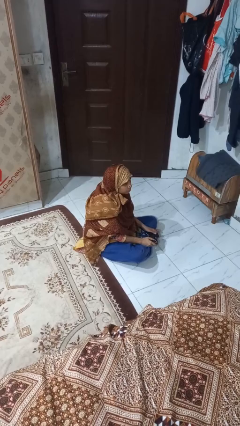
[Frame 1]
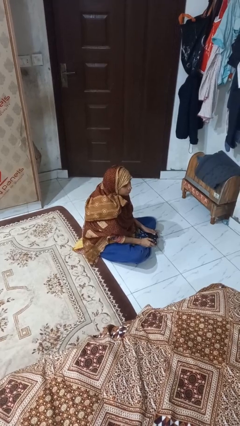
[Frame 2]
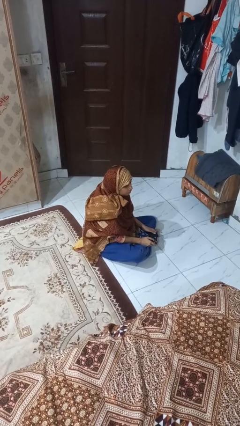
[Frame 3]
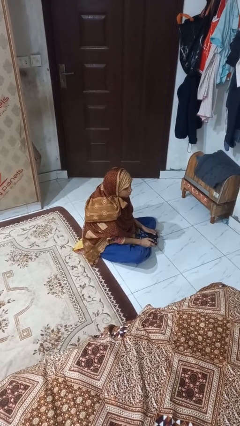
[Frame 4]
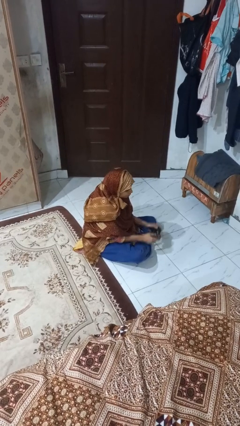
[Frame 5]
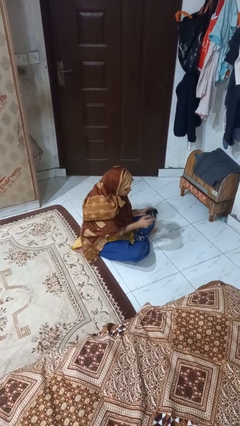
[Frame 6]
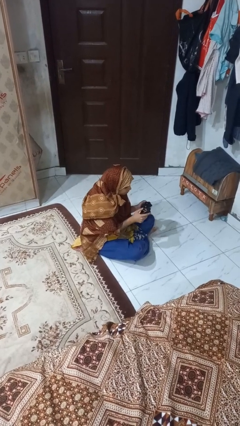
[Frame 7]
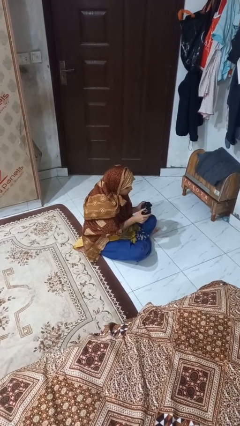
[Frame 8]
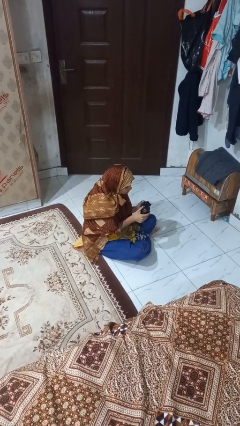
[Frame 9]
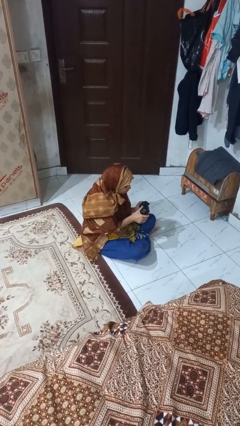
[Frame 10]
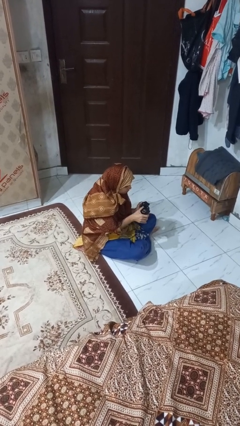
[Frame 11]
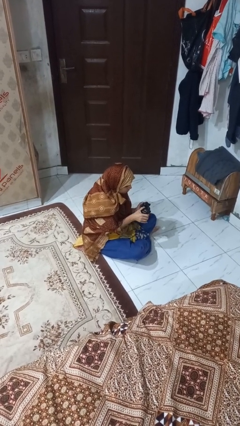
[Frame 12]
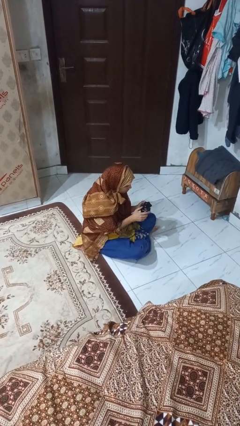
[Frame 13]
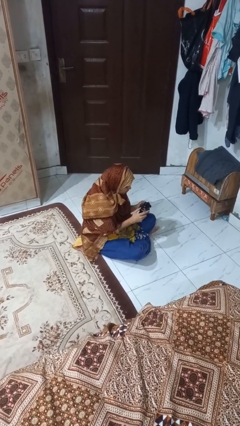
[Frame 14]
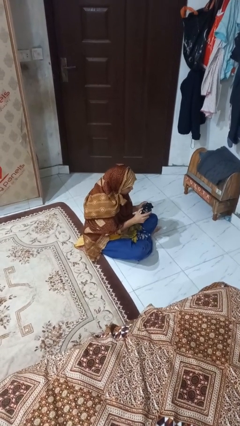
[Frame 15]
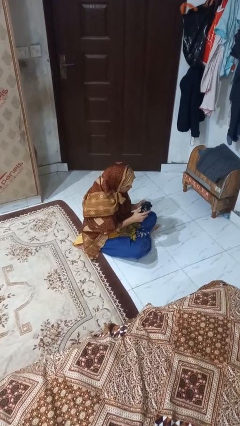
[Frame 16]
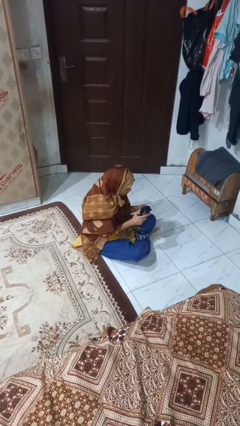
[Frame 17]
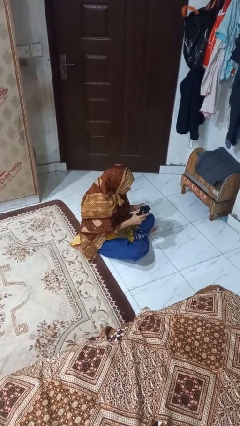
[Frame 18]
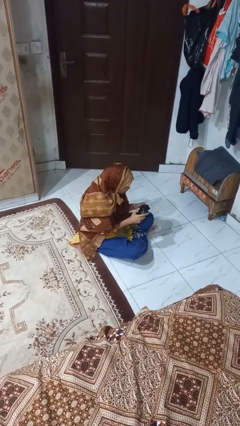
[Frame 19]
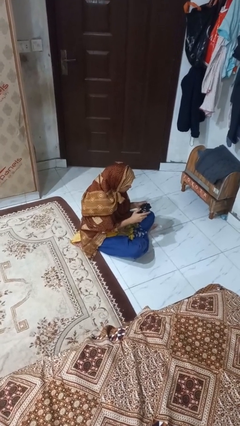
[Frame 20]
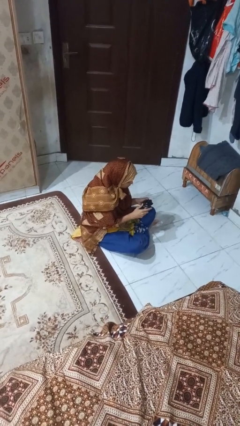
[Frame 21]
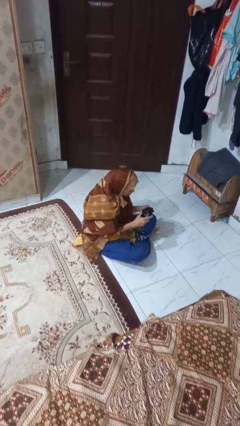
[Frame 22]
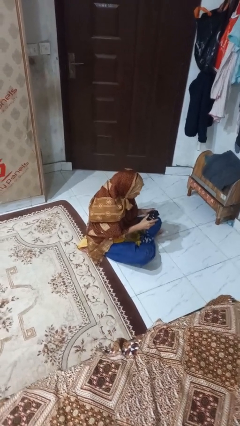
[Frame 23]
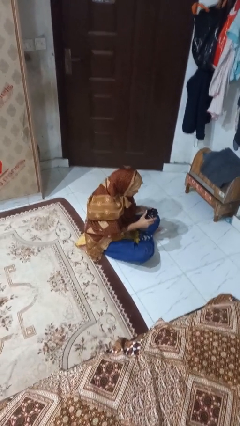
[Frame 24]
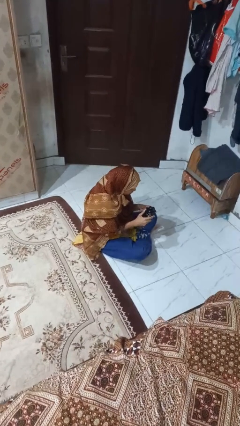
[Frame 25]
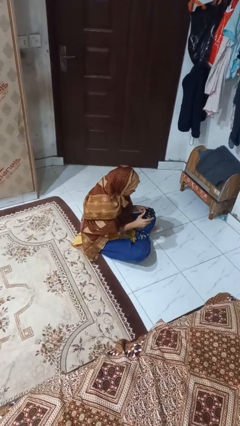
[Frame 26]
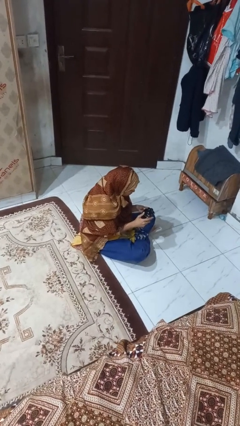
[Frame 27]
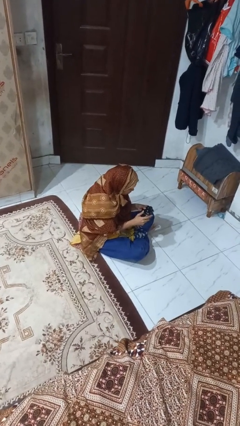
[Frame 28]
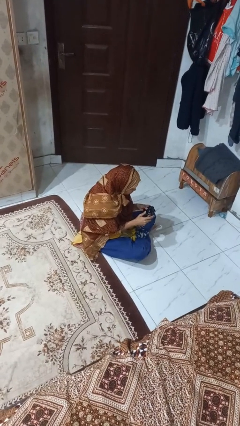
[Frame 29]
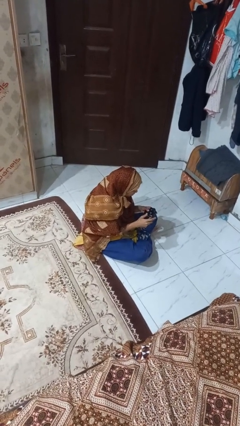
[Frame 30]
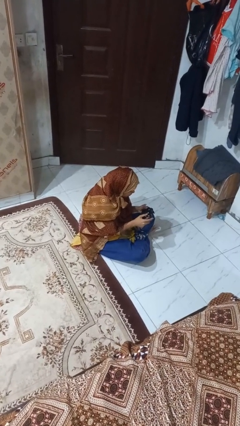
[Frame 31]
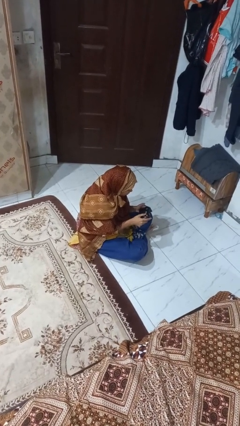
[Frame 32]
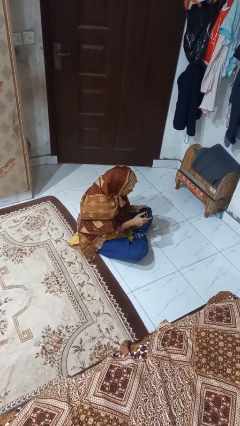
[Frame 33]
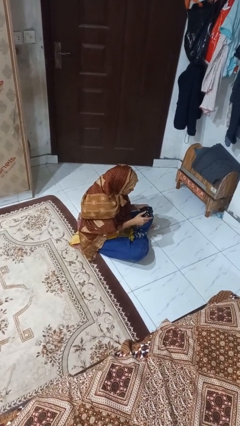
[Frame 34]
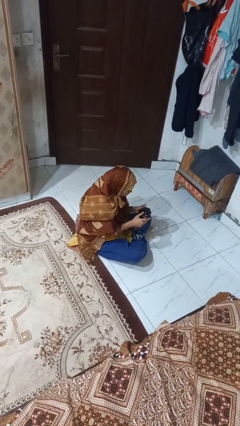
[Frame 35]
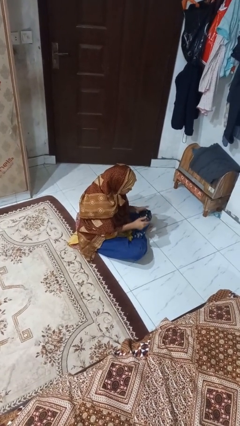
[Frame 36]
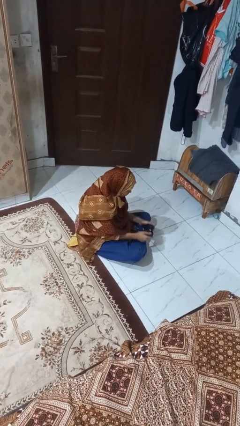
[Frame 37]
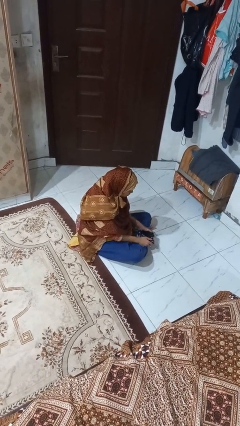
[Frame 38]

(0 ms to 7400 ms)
person interacts with handheld game

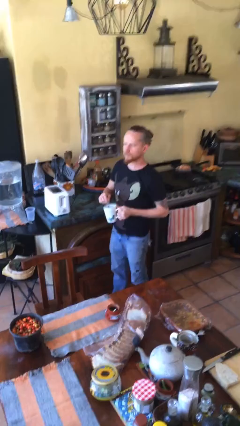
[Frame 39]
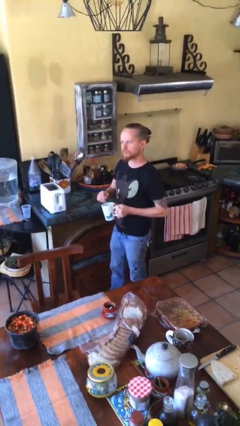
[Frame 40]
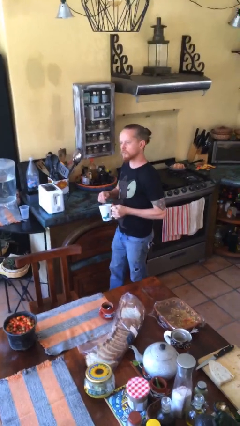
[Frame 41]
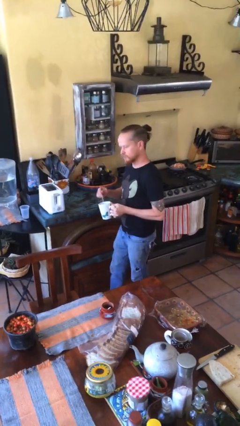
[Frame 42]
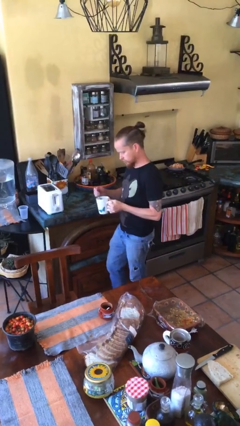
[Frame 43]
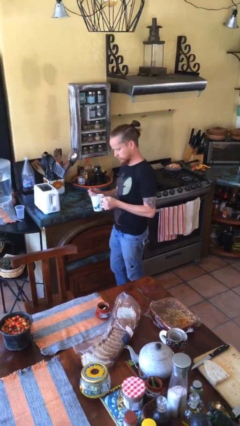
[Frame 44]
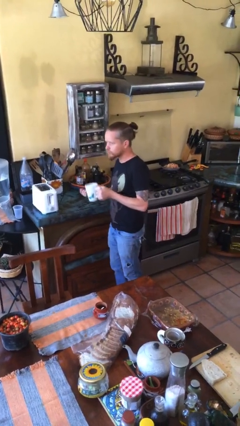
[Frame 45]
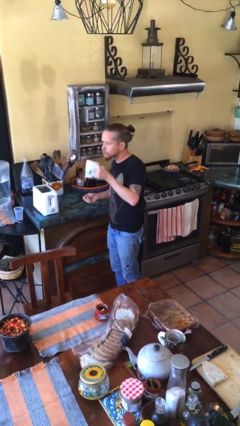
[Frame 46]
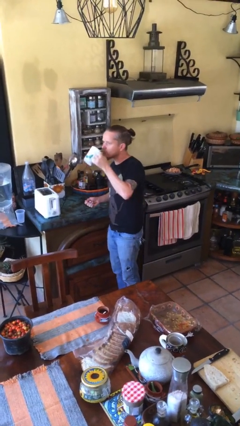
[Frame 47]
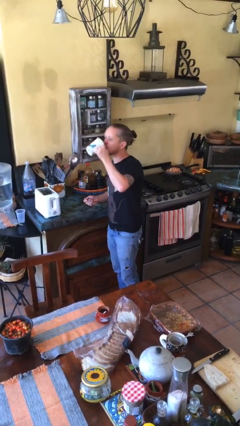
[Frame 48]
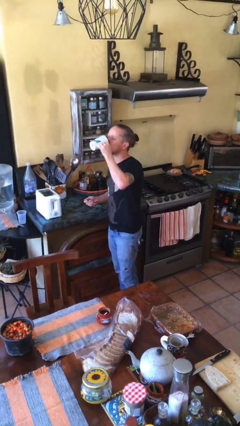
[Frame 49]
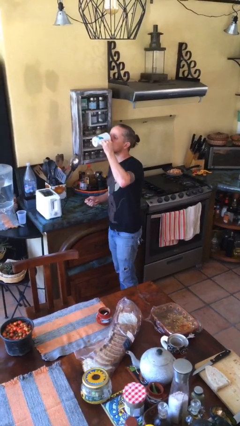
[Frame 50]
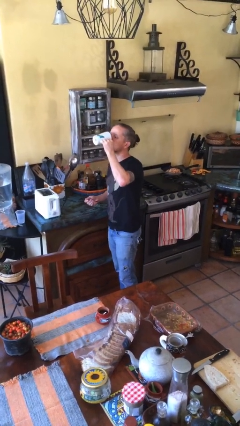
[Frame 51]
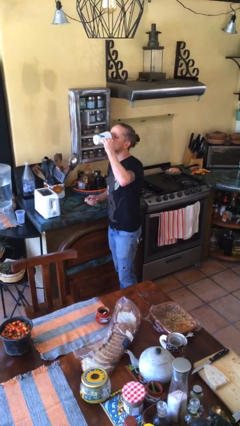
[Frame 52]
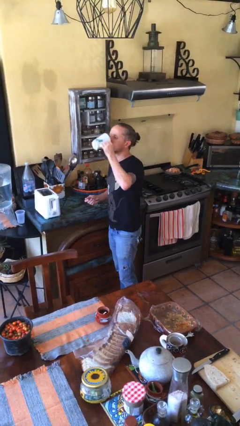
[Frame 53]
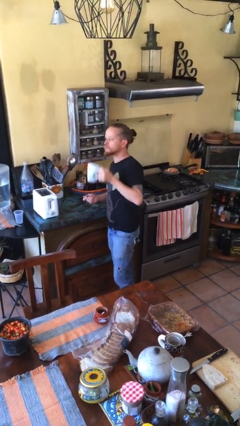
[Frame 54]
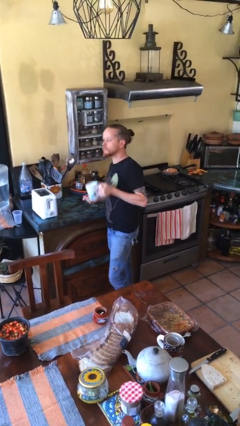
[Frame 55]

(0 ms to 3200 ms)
person drinks from mug

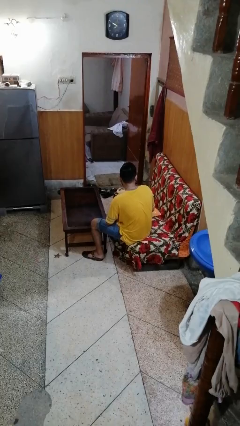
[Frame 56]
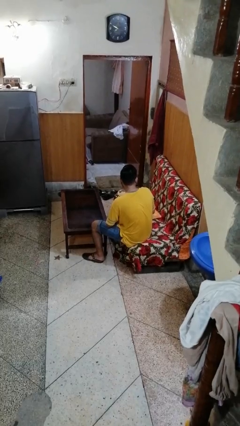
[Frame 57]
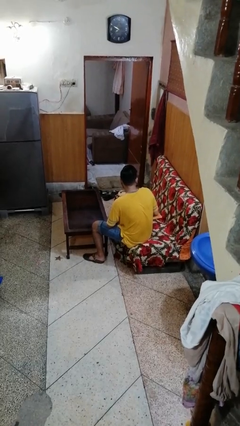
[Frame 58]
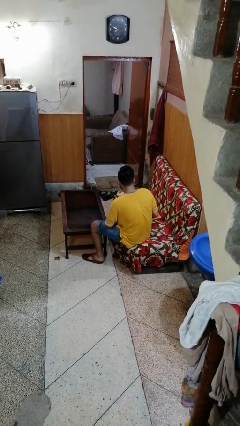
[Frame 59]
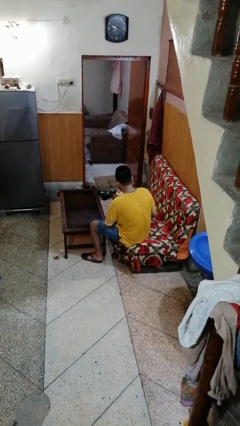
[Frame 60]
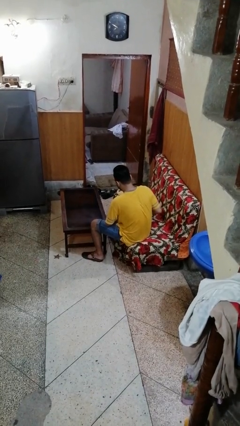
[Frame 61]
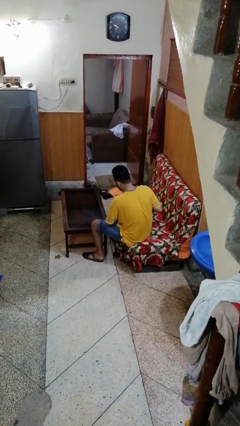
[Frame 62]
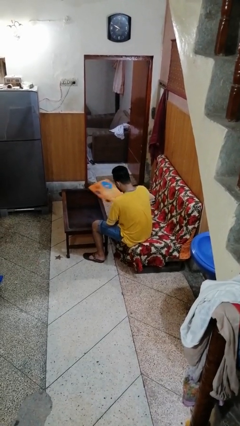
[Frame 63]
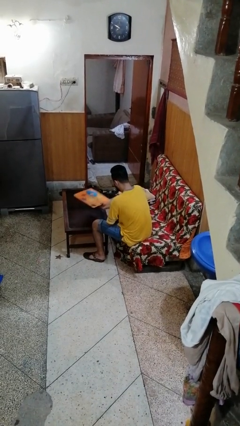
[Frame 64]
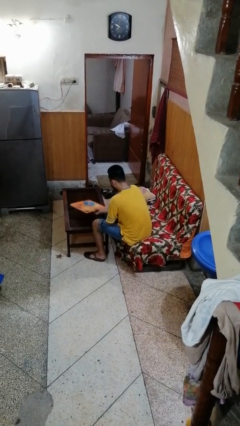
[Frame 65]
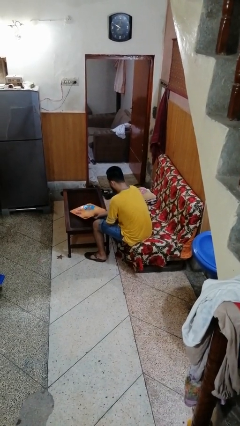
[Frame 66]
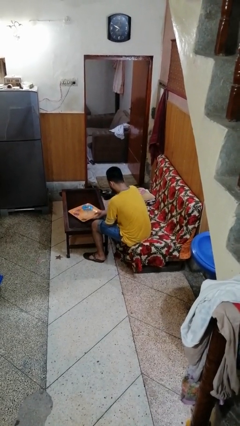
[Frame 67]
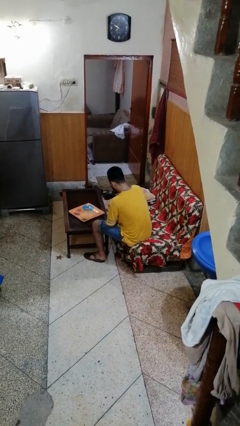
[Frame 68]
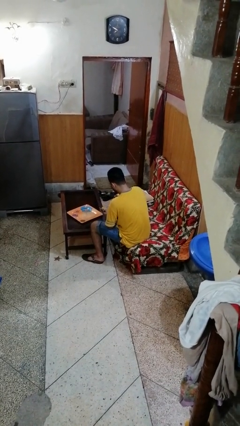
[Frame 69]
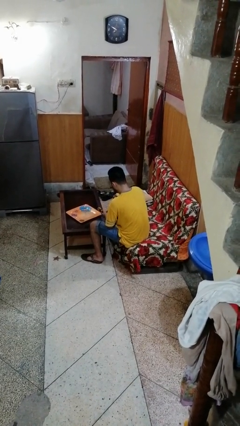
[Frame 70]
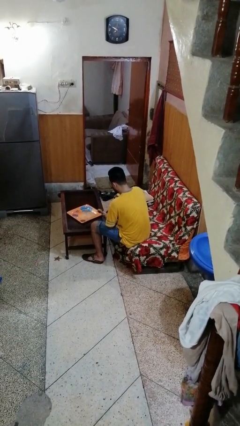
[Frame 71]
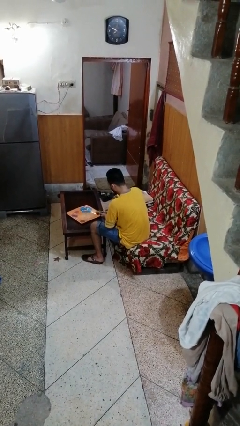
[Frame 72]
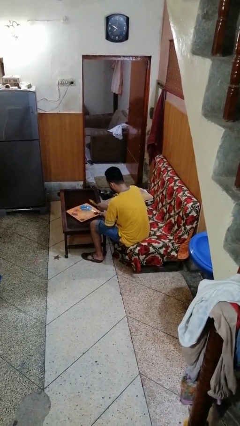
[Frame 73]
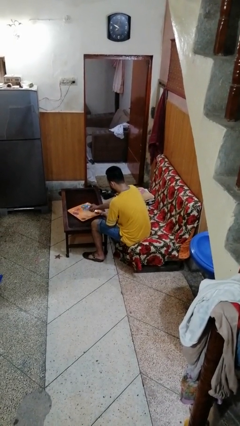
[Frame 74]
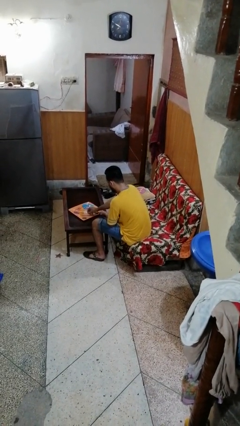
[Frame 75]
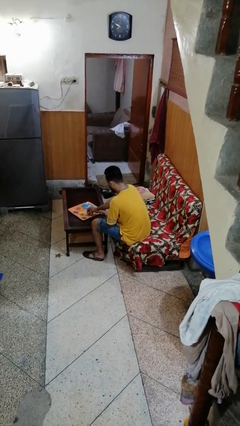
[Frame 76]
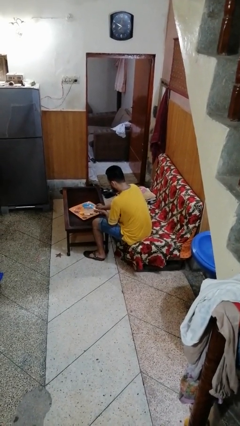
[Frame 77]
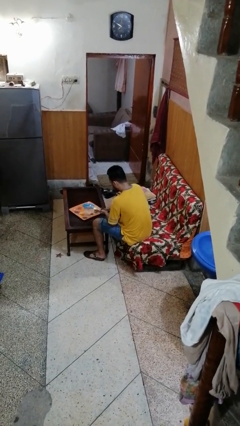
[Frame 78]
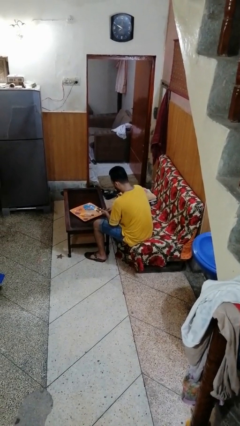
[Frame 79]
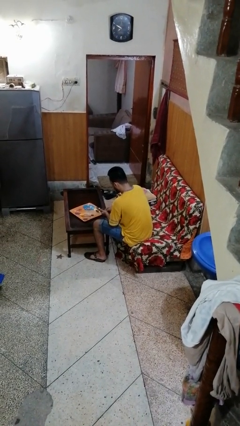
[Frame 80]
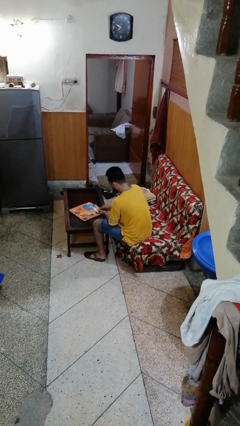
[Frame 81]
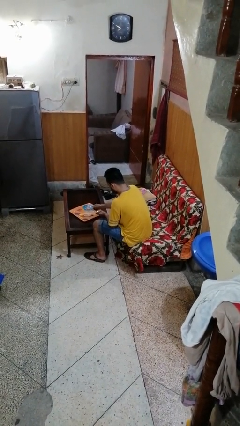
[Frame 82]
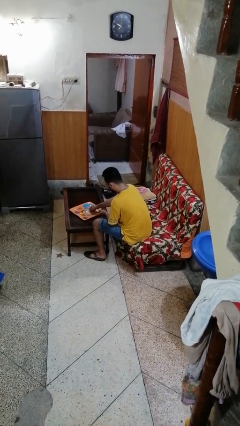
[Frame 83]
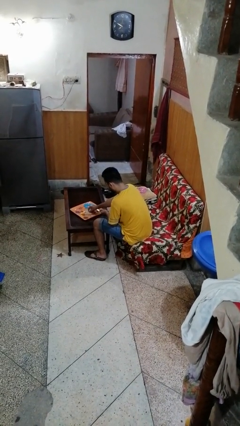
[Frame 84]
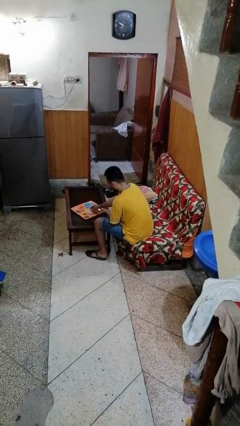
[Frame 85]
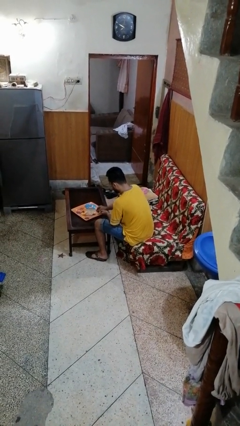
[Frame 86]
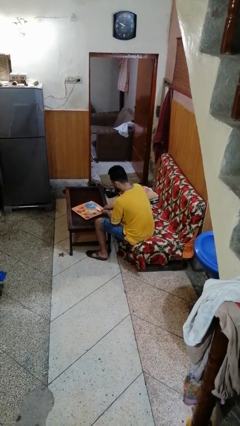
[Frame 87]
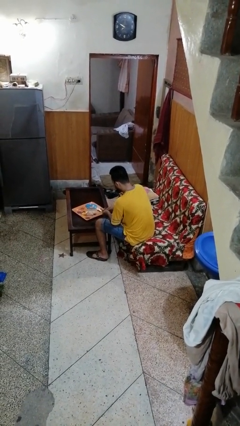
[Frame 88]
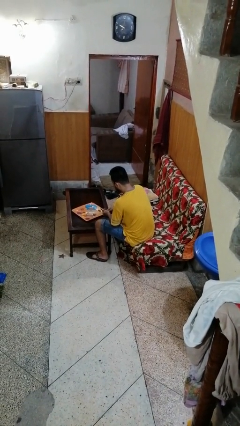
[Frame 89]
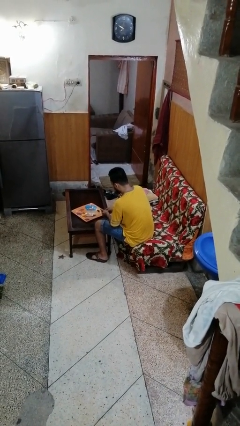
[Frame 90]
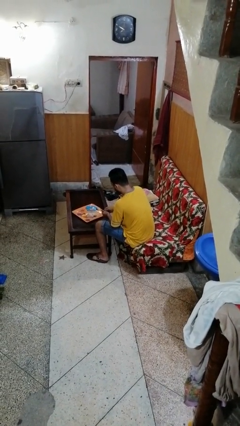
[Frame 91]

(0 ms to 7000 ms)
person sets table

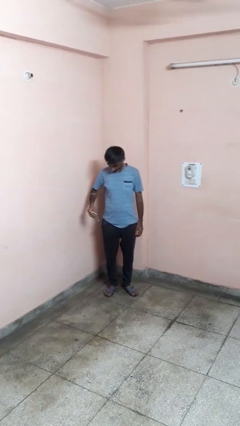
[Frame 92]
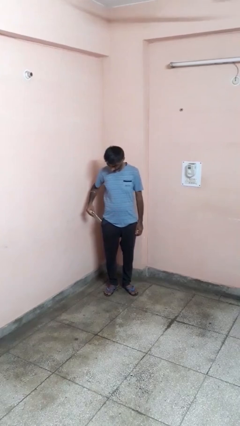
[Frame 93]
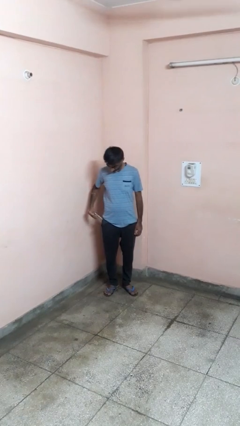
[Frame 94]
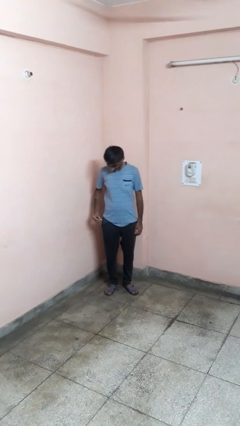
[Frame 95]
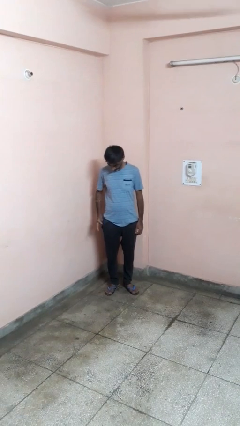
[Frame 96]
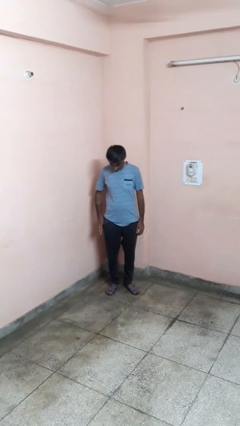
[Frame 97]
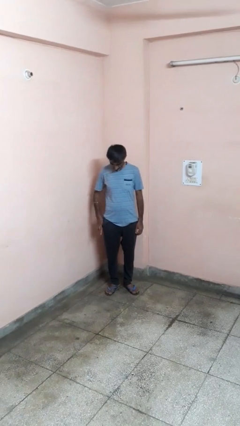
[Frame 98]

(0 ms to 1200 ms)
person puts phone into pocket
